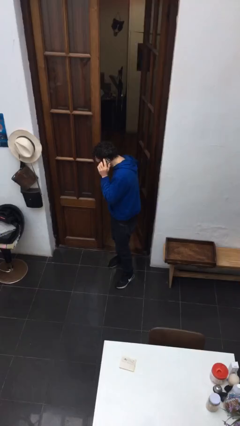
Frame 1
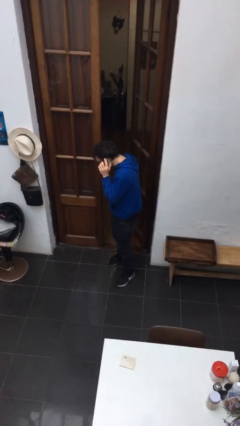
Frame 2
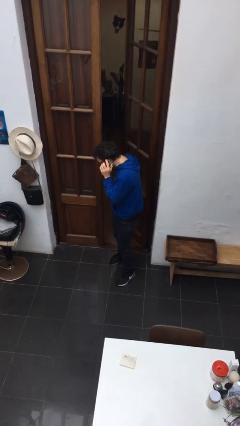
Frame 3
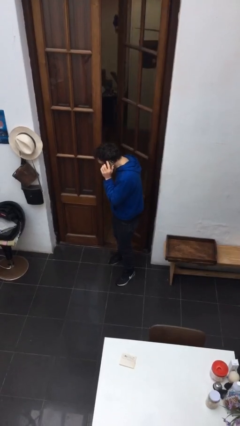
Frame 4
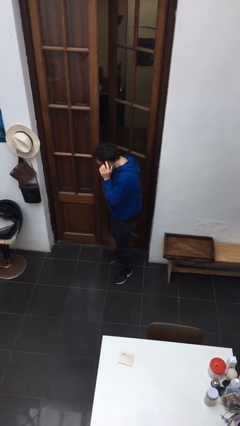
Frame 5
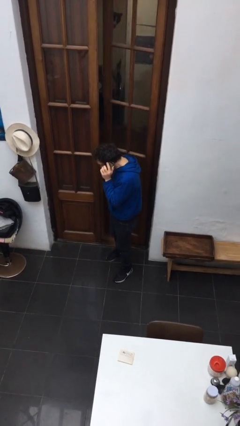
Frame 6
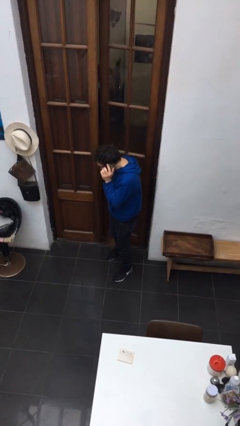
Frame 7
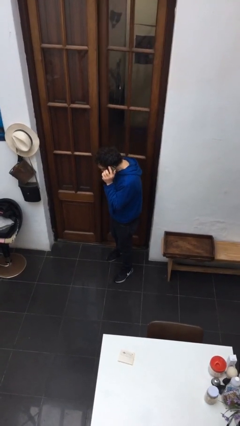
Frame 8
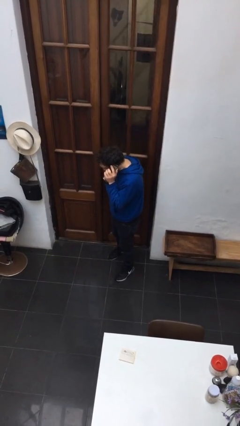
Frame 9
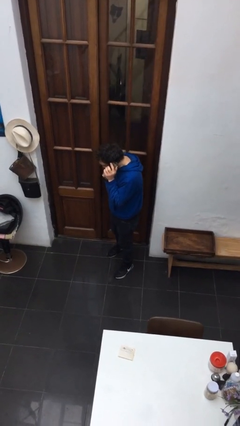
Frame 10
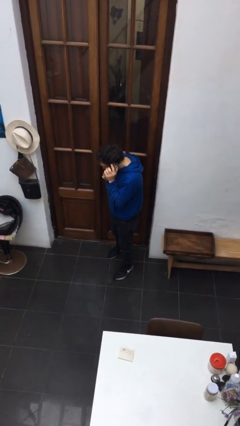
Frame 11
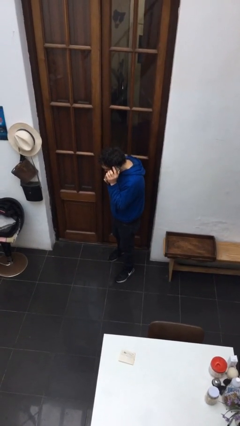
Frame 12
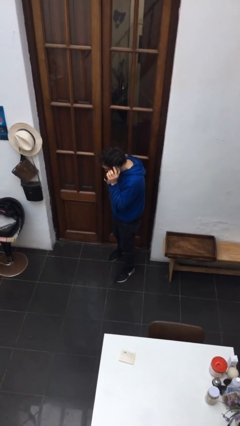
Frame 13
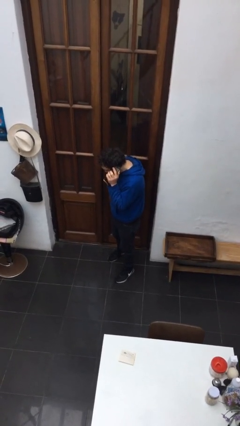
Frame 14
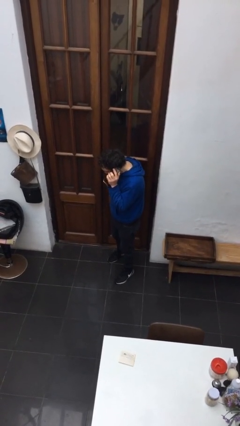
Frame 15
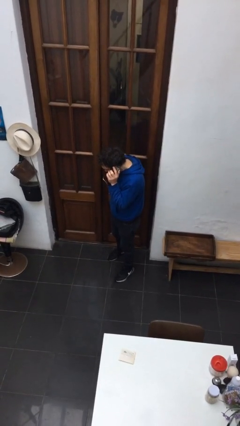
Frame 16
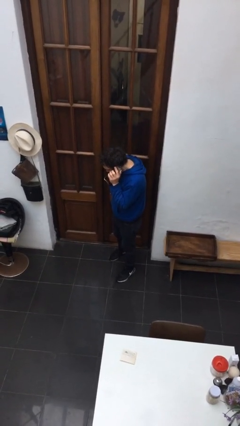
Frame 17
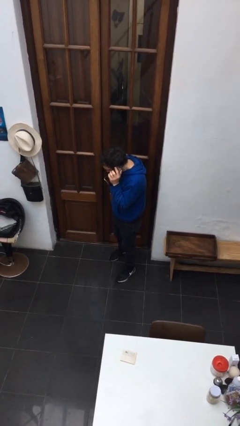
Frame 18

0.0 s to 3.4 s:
person closes facility door

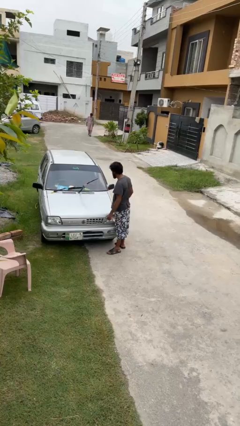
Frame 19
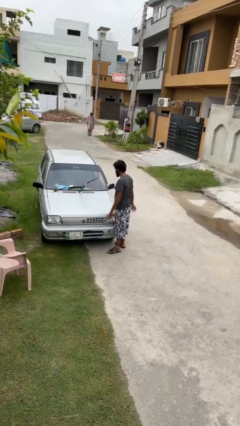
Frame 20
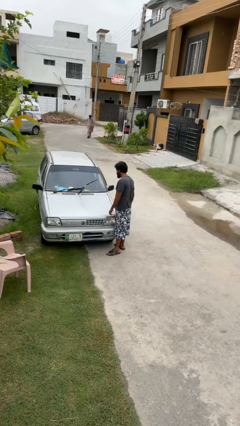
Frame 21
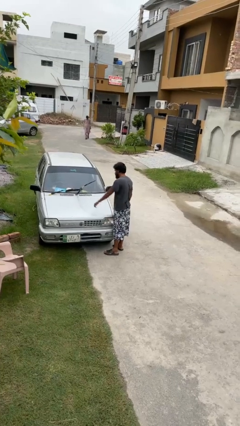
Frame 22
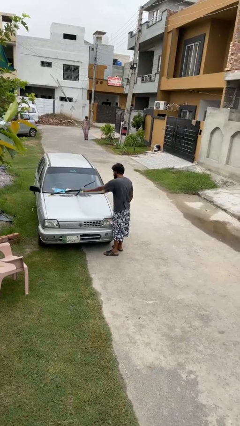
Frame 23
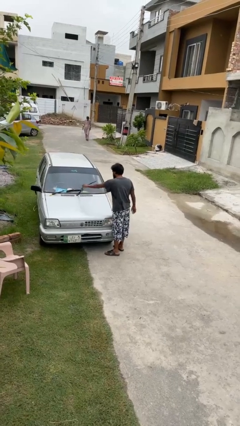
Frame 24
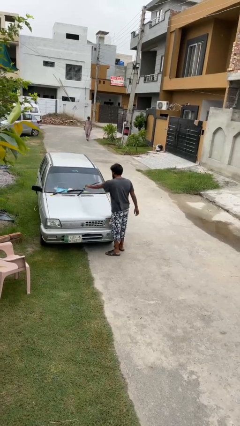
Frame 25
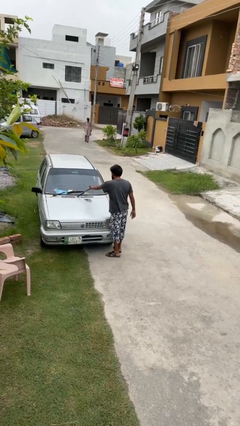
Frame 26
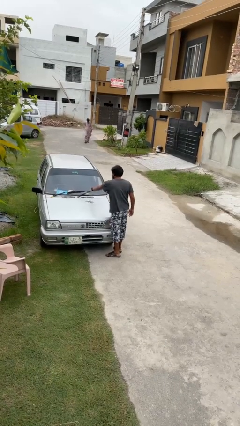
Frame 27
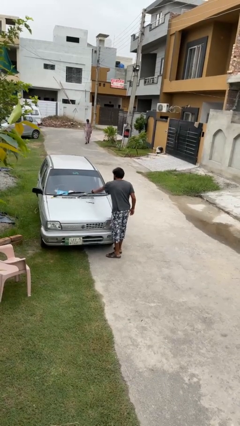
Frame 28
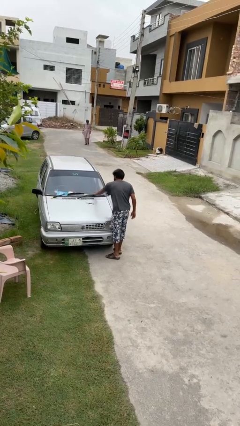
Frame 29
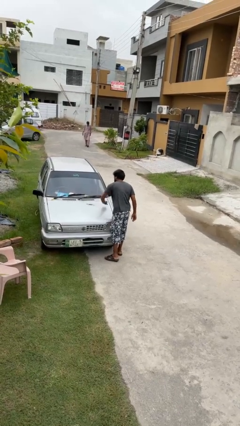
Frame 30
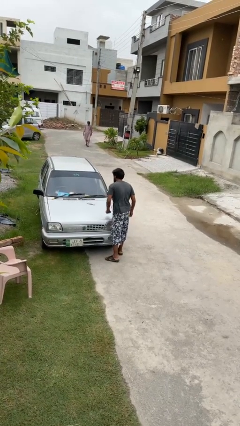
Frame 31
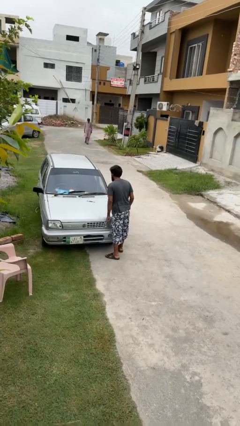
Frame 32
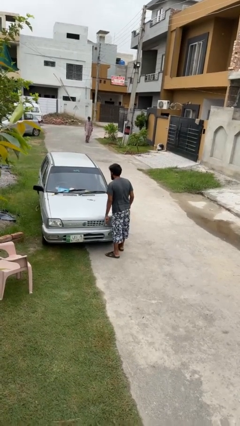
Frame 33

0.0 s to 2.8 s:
person flips down car wipers

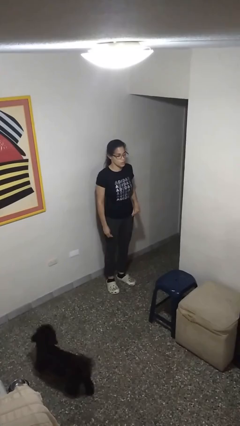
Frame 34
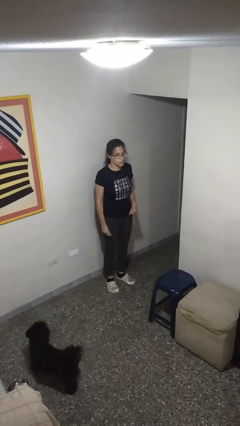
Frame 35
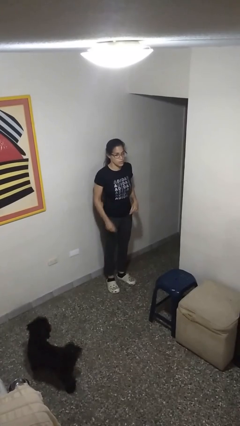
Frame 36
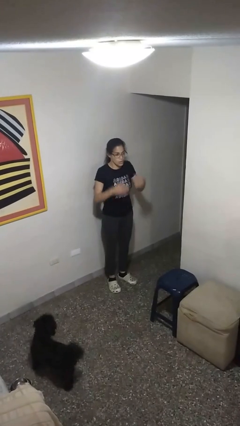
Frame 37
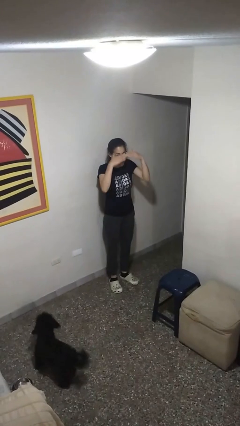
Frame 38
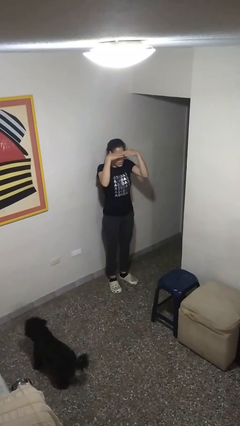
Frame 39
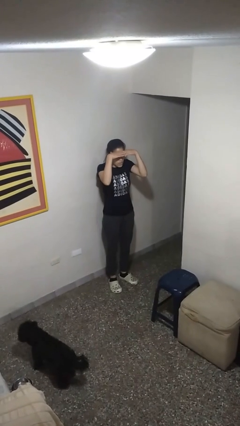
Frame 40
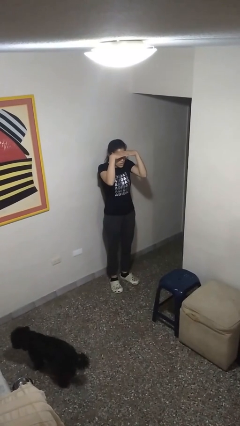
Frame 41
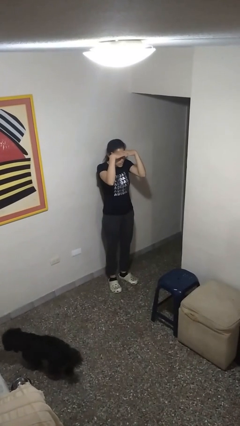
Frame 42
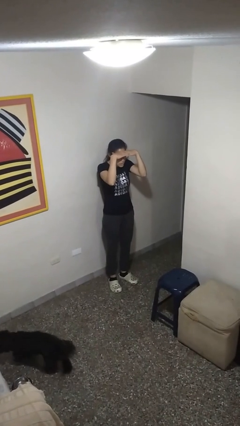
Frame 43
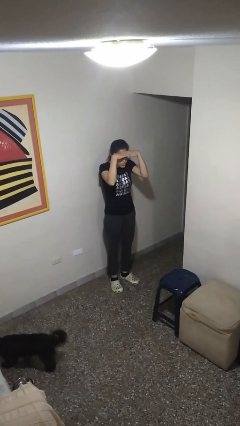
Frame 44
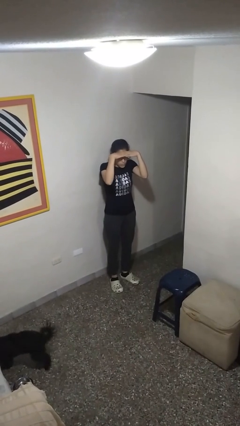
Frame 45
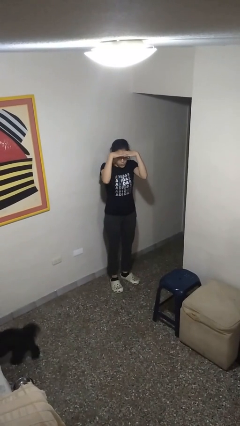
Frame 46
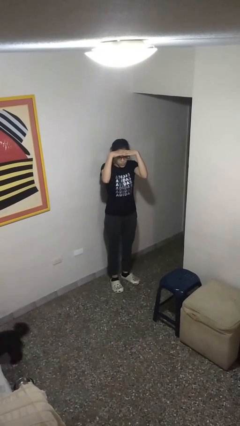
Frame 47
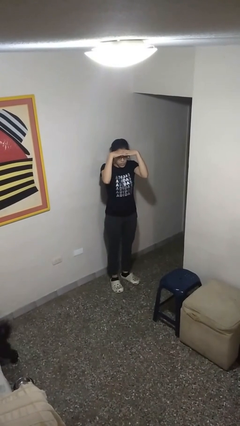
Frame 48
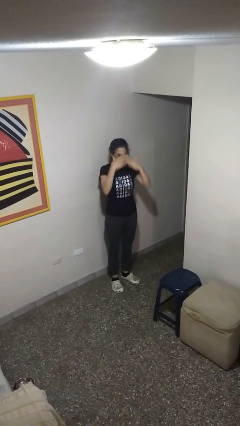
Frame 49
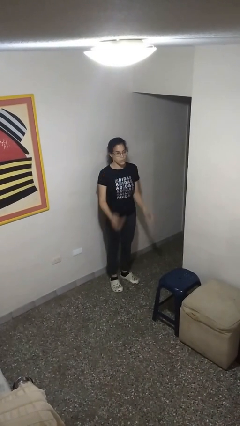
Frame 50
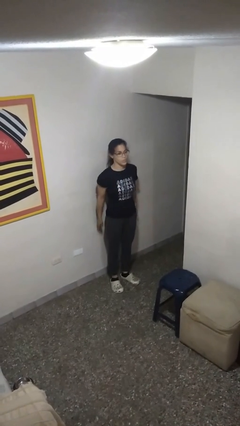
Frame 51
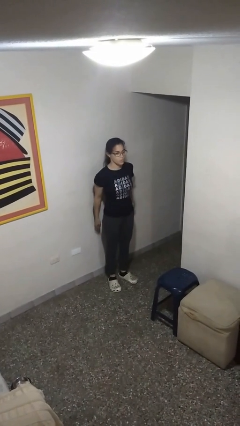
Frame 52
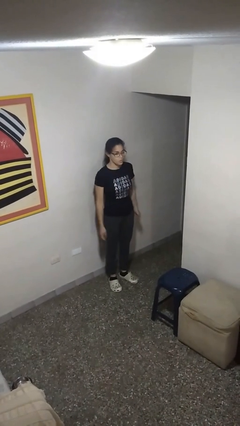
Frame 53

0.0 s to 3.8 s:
person shades eyes

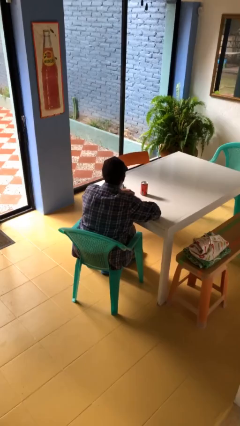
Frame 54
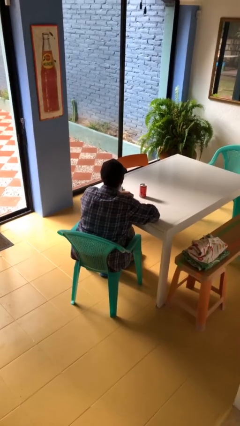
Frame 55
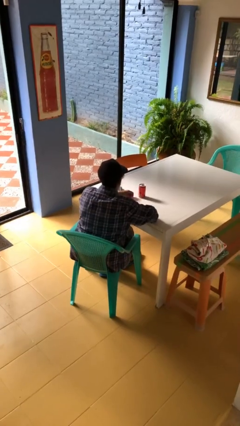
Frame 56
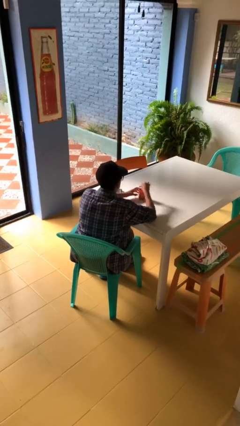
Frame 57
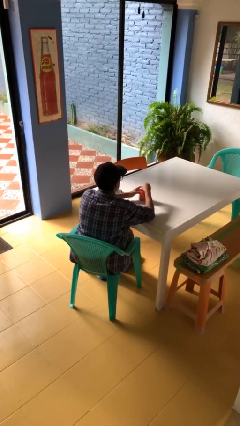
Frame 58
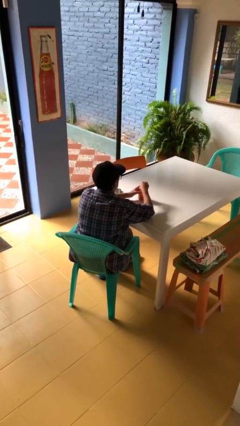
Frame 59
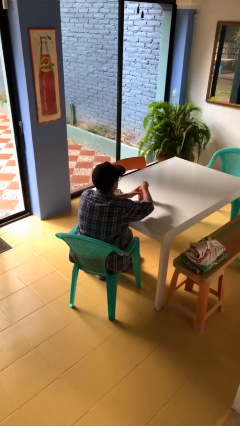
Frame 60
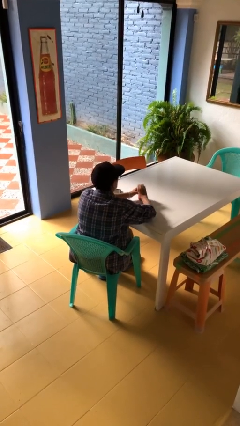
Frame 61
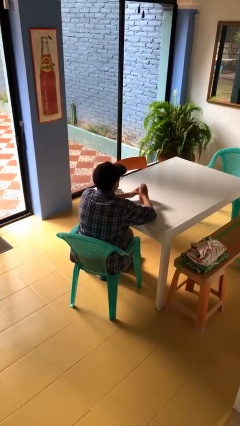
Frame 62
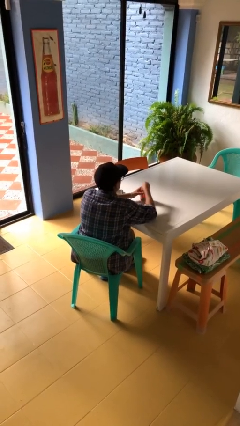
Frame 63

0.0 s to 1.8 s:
person opens beverage can

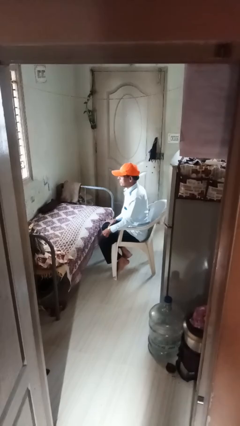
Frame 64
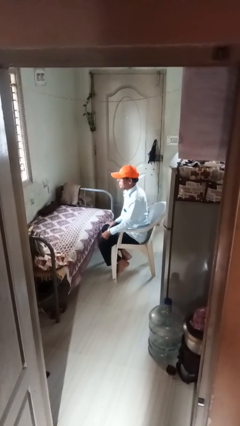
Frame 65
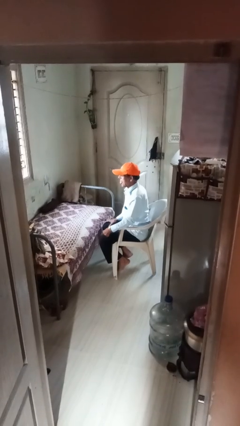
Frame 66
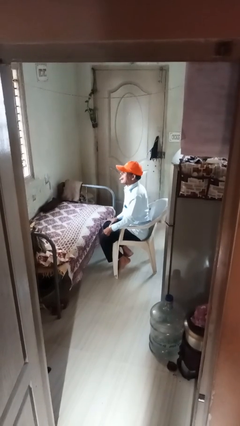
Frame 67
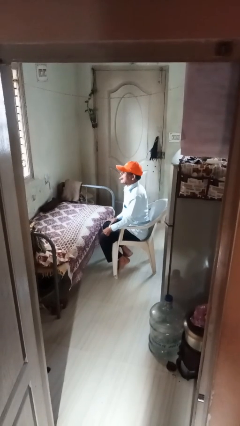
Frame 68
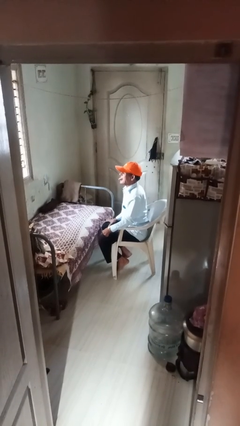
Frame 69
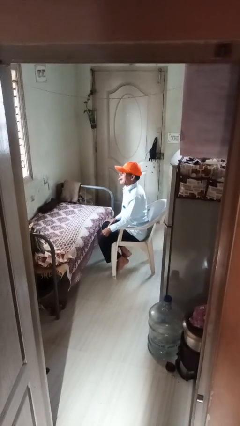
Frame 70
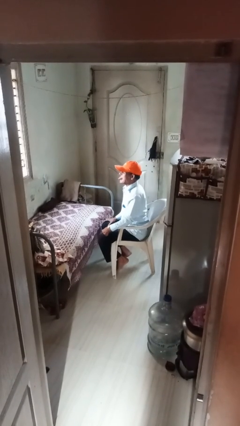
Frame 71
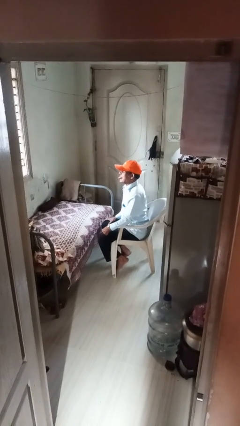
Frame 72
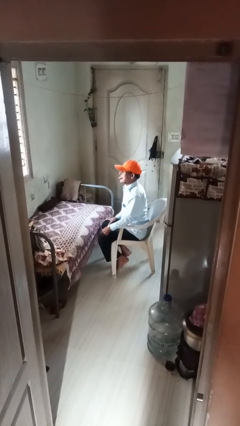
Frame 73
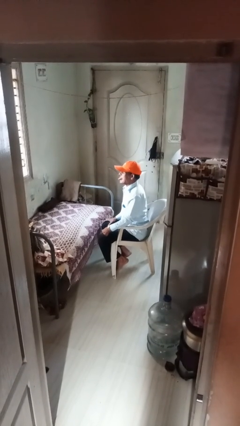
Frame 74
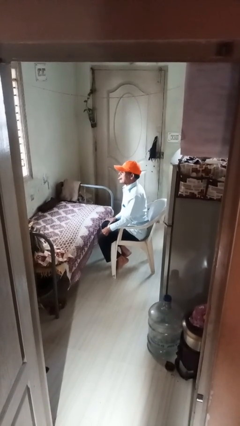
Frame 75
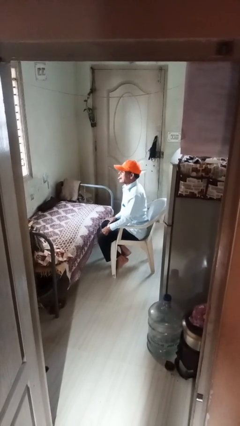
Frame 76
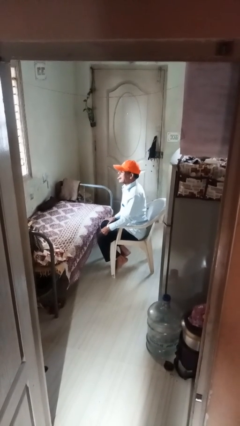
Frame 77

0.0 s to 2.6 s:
person sticks out tongue

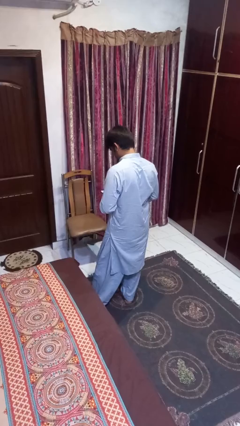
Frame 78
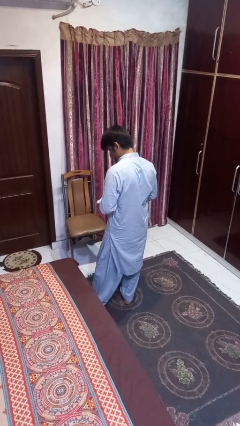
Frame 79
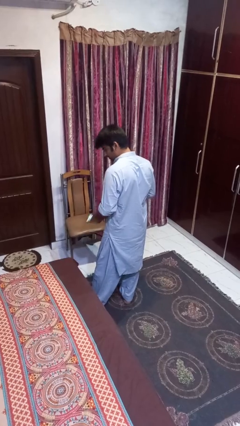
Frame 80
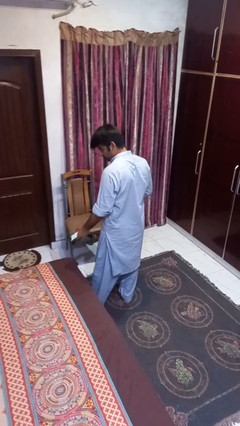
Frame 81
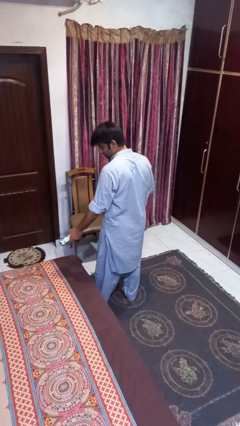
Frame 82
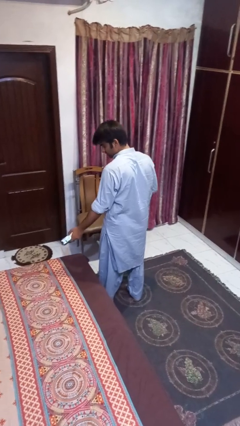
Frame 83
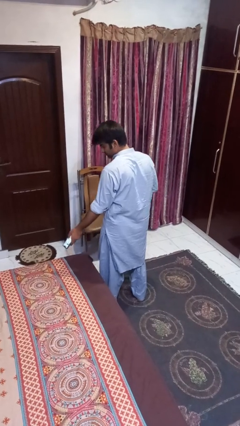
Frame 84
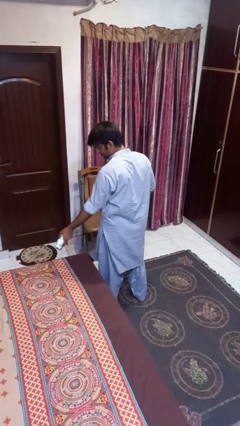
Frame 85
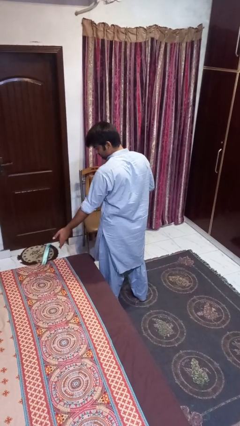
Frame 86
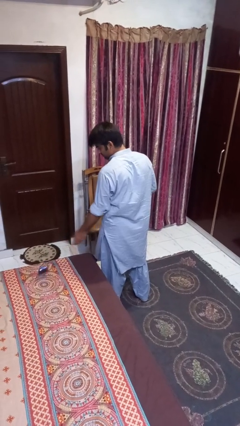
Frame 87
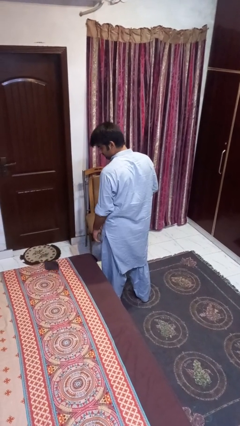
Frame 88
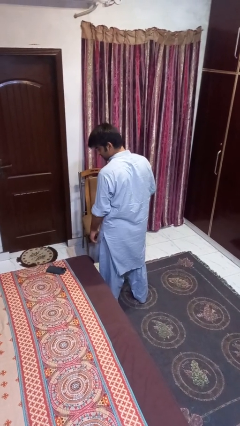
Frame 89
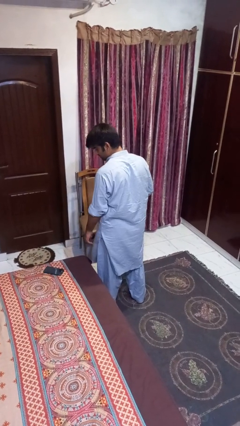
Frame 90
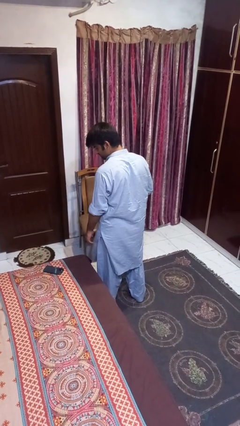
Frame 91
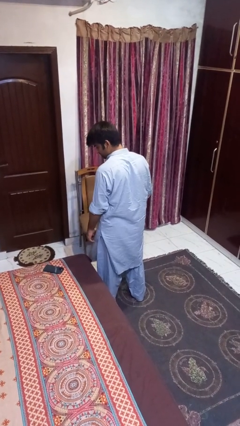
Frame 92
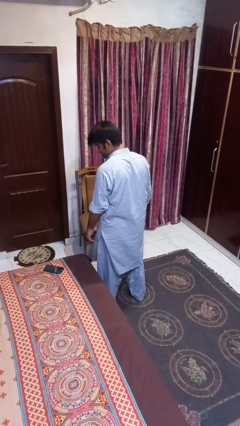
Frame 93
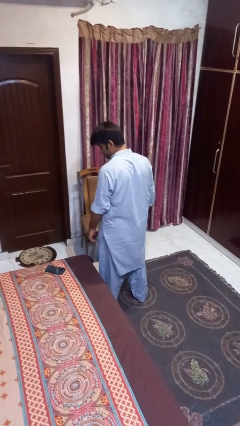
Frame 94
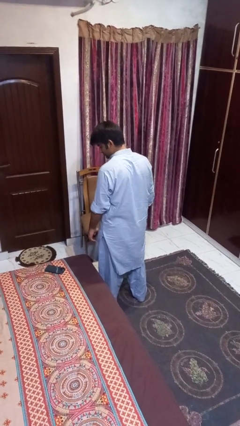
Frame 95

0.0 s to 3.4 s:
person throws object on bed
